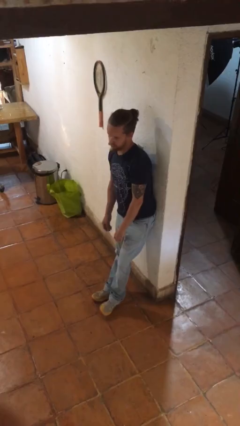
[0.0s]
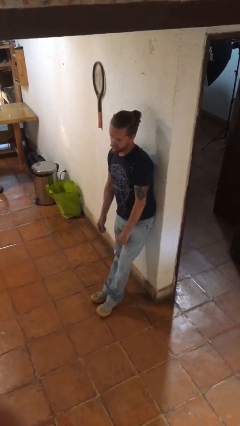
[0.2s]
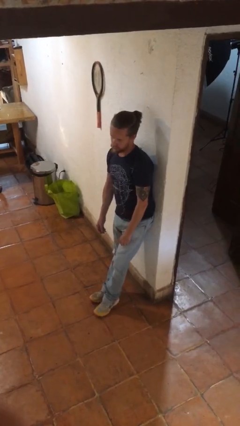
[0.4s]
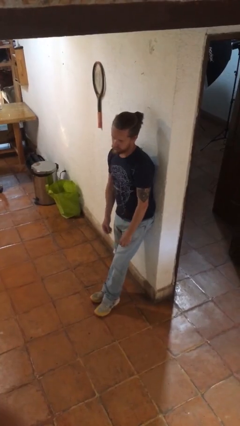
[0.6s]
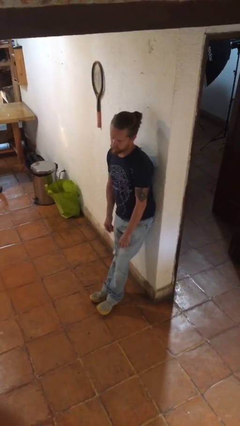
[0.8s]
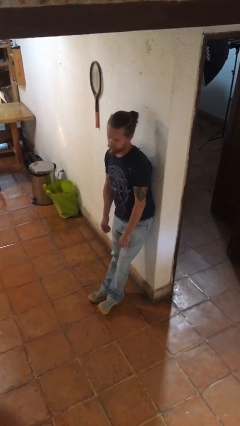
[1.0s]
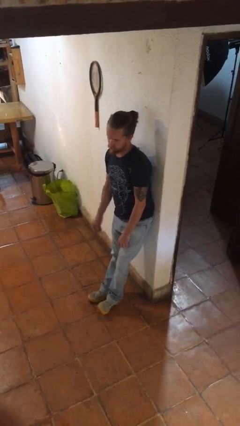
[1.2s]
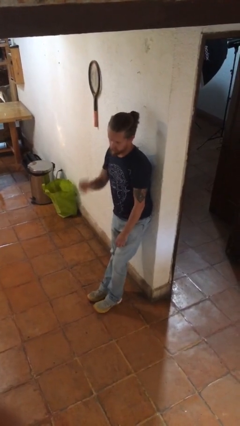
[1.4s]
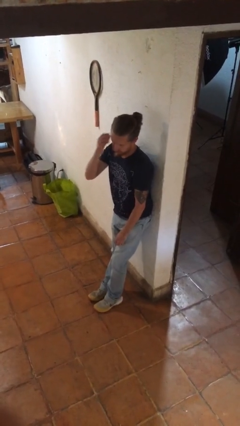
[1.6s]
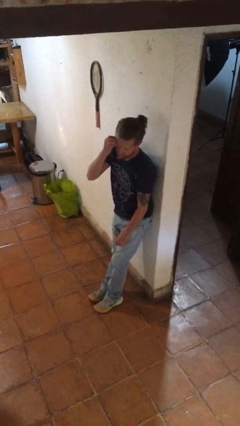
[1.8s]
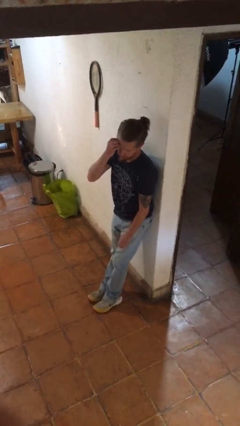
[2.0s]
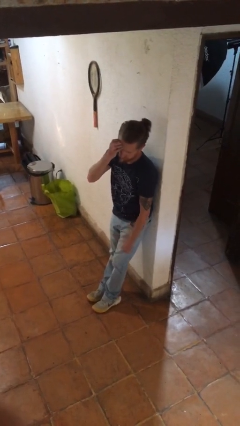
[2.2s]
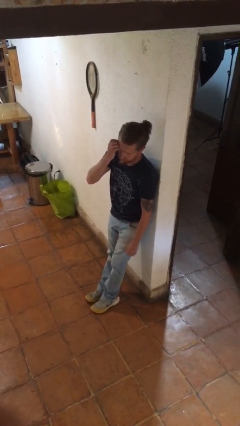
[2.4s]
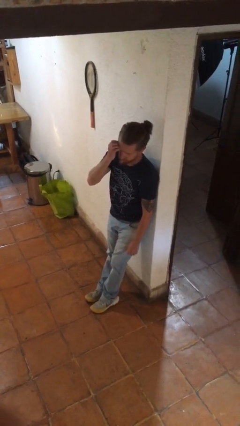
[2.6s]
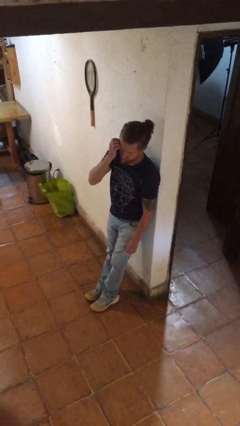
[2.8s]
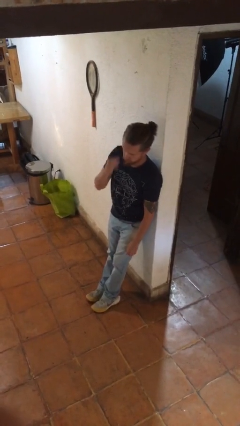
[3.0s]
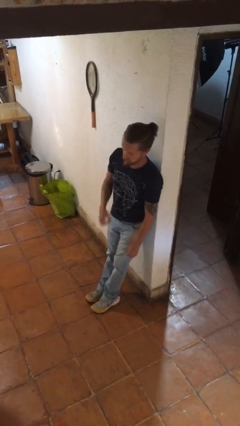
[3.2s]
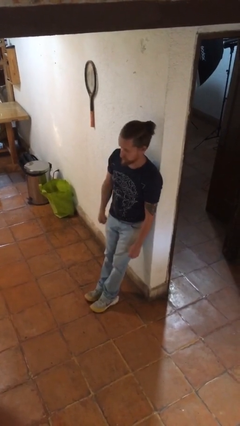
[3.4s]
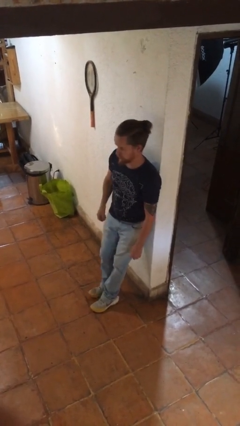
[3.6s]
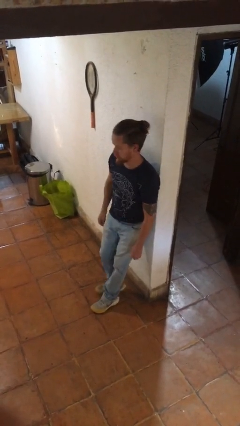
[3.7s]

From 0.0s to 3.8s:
person scratches face

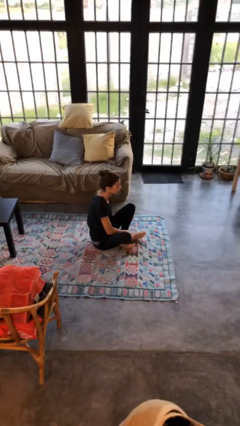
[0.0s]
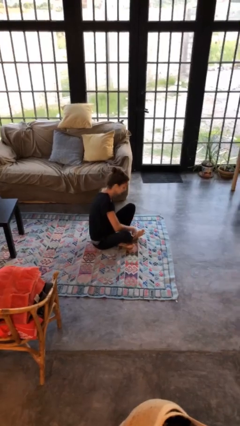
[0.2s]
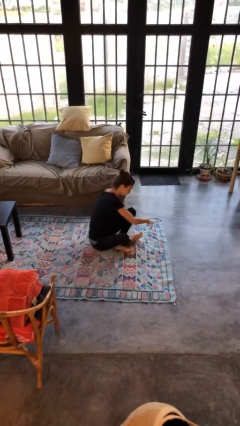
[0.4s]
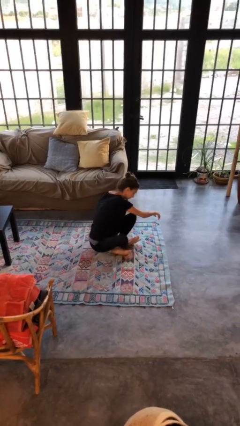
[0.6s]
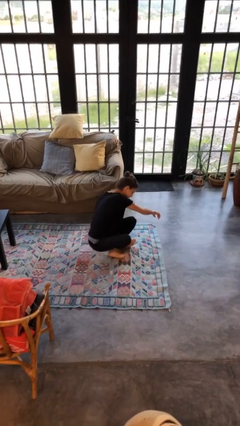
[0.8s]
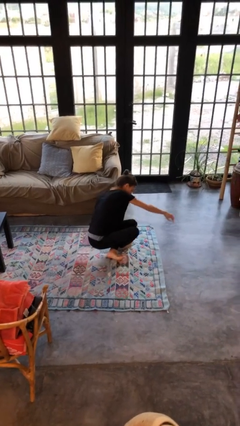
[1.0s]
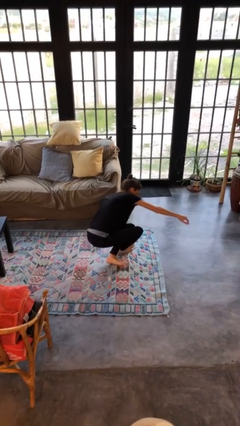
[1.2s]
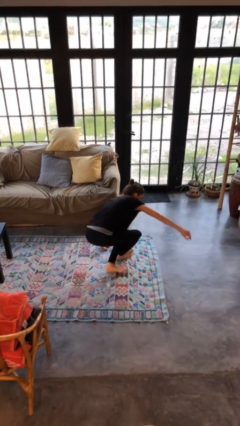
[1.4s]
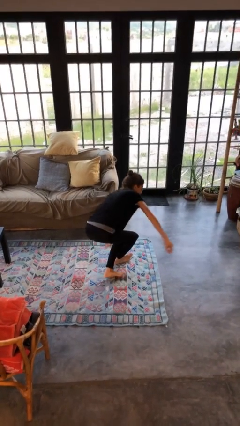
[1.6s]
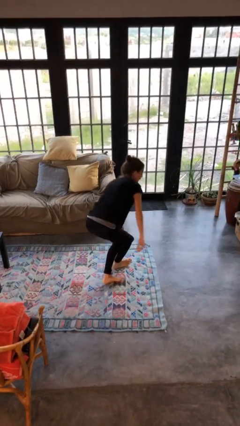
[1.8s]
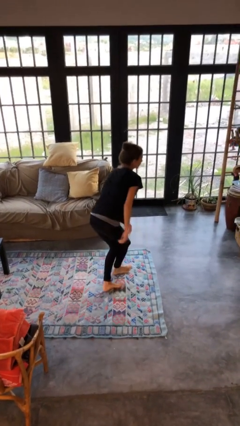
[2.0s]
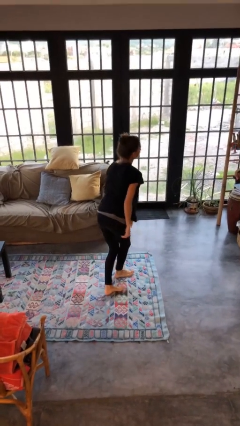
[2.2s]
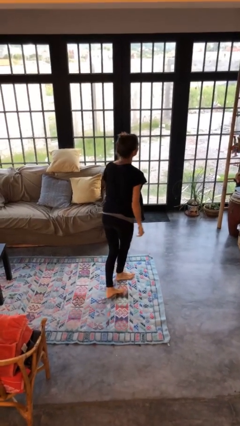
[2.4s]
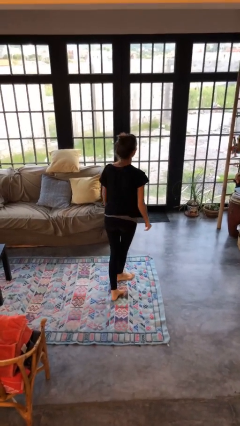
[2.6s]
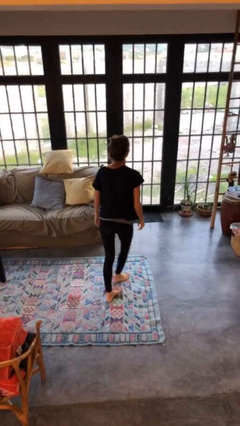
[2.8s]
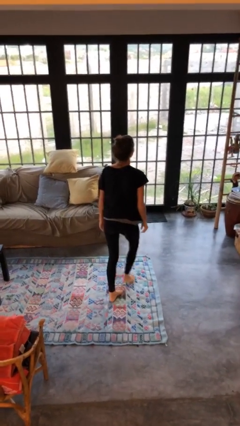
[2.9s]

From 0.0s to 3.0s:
person stands up from floor

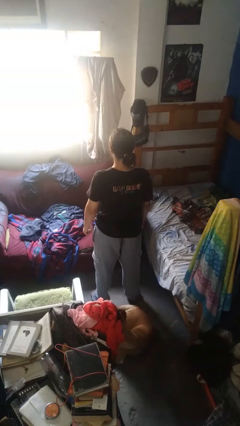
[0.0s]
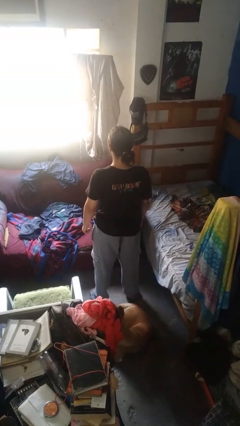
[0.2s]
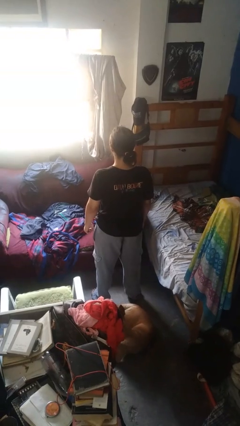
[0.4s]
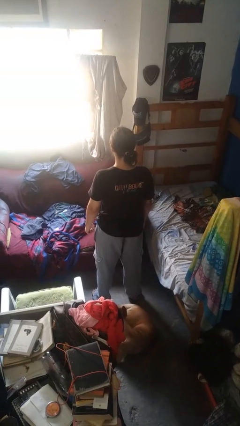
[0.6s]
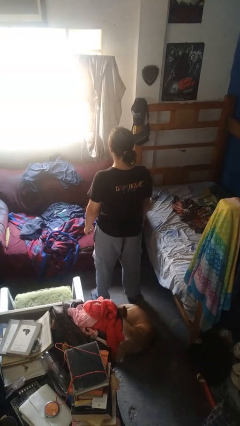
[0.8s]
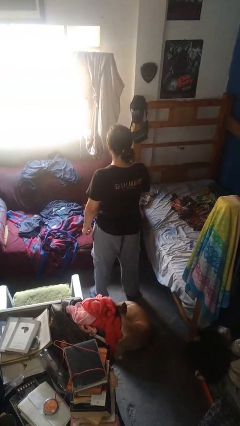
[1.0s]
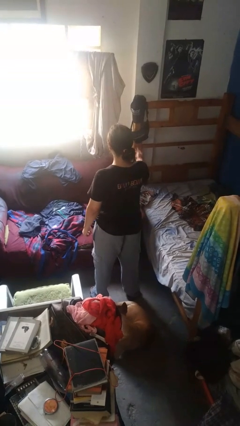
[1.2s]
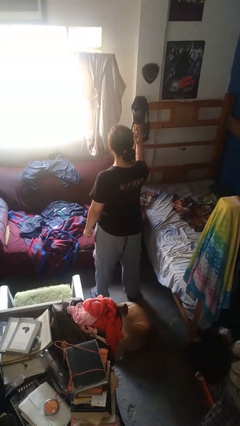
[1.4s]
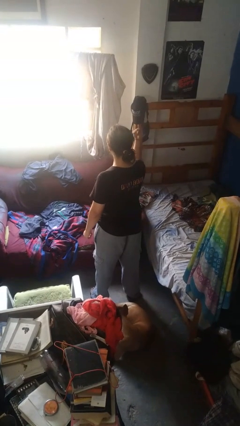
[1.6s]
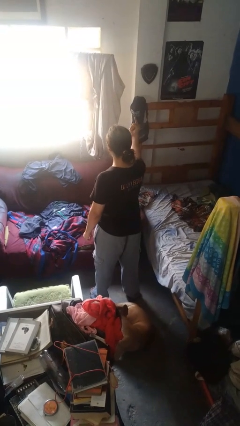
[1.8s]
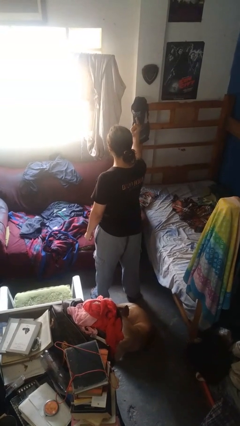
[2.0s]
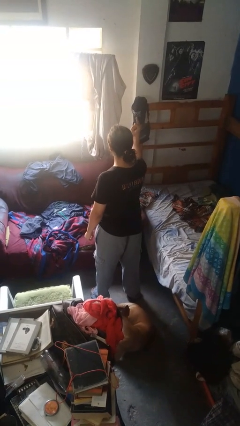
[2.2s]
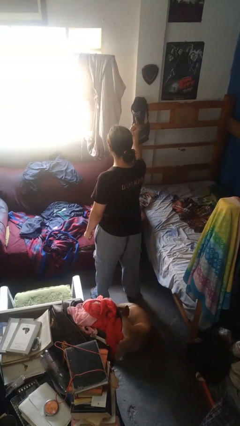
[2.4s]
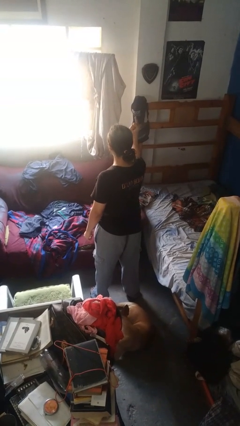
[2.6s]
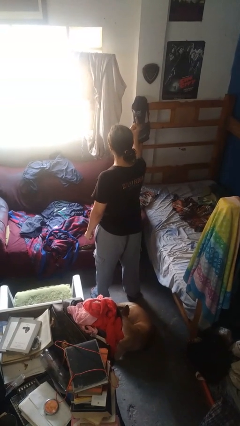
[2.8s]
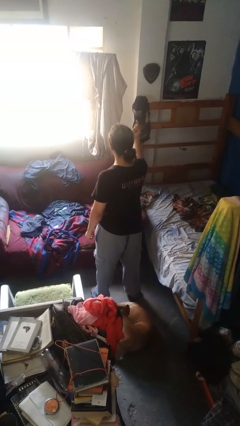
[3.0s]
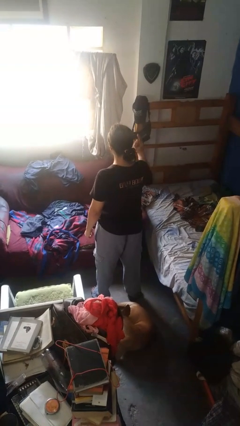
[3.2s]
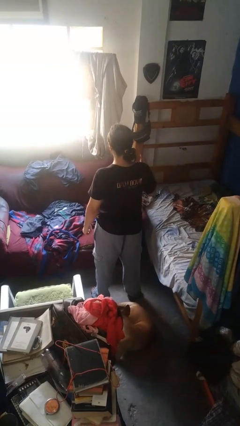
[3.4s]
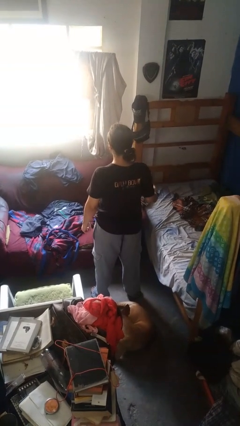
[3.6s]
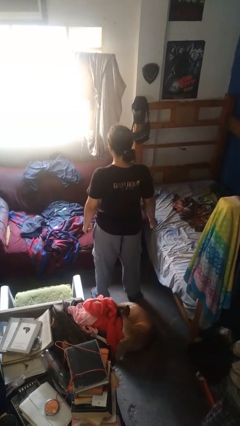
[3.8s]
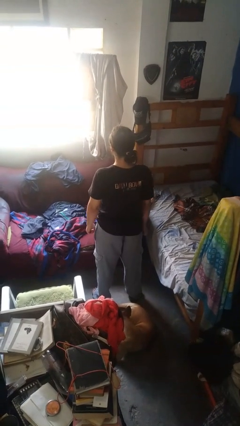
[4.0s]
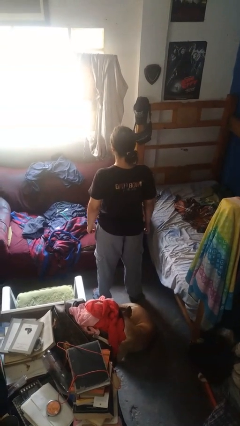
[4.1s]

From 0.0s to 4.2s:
person gestures number one

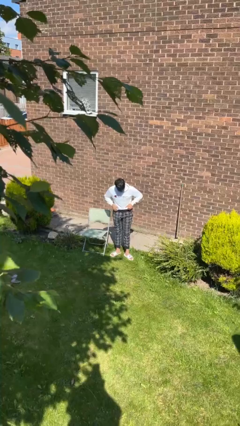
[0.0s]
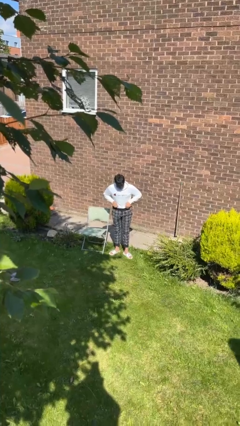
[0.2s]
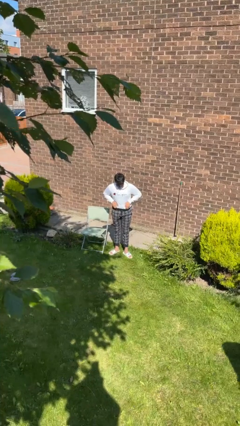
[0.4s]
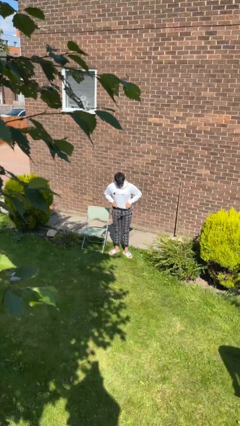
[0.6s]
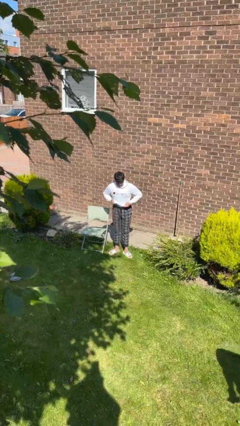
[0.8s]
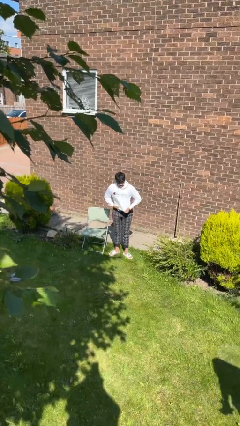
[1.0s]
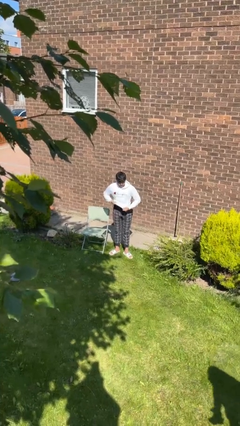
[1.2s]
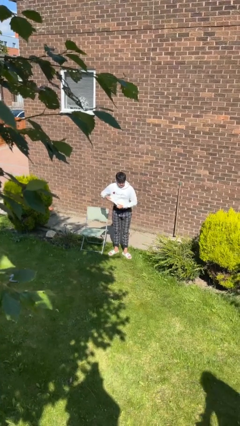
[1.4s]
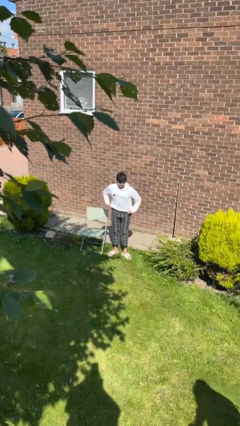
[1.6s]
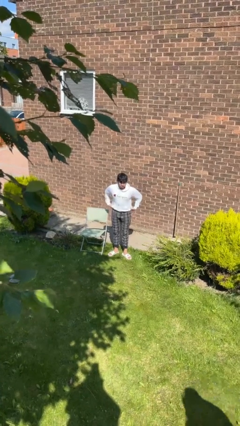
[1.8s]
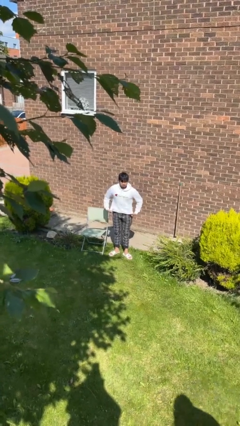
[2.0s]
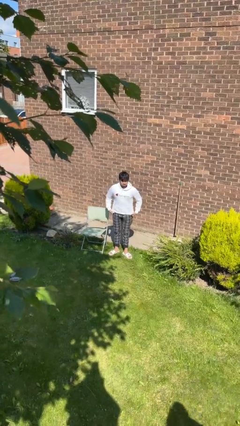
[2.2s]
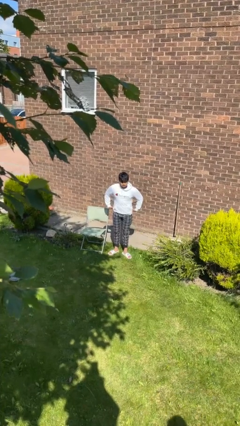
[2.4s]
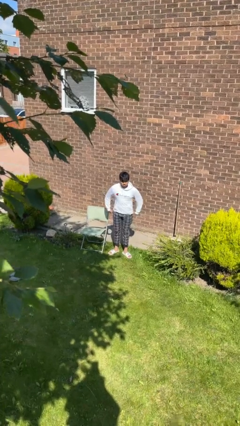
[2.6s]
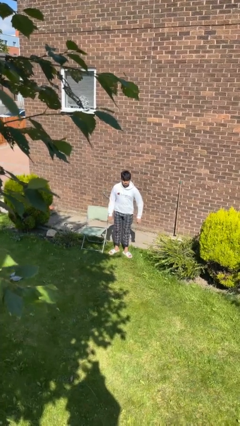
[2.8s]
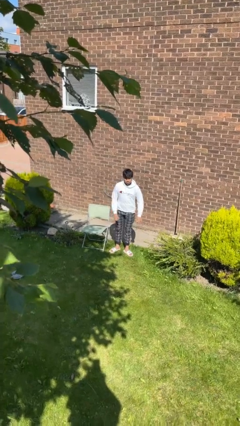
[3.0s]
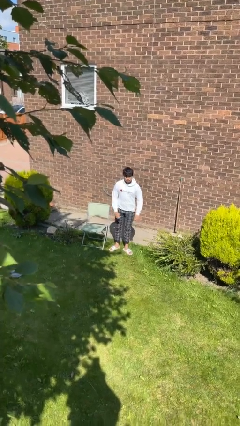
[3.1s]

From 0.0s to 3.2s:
person untucks shirt

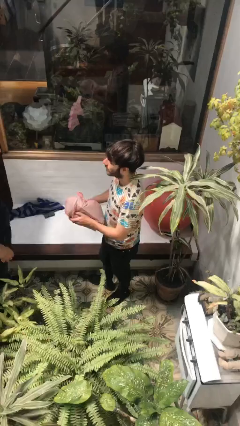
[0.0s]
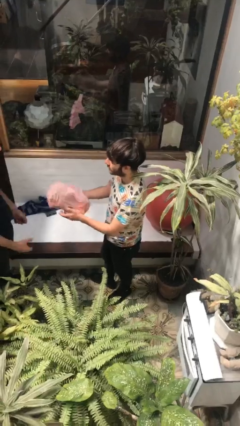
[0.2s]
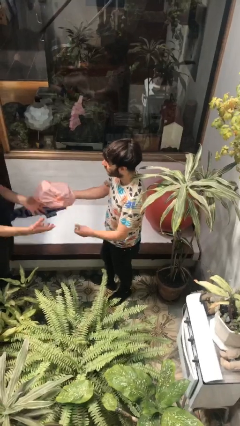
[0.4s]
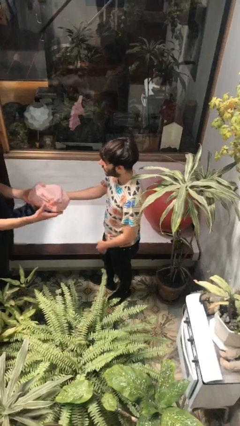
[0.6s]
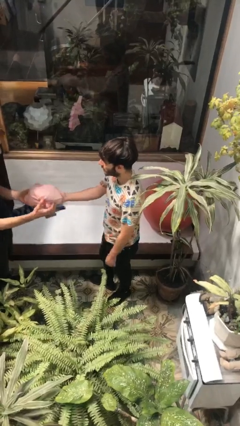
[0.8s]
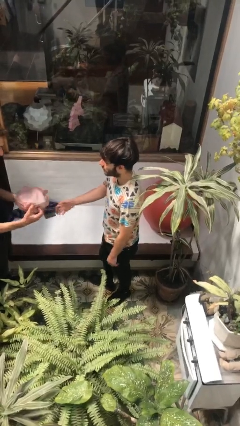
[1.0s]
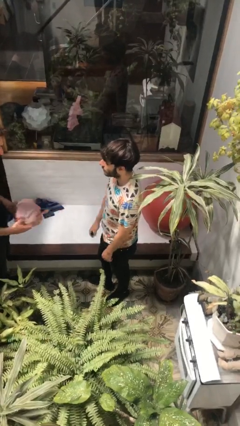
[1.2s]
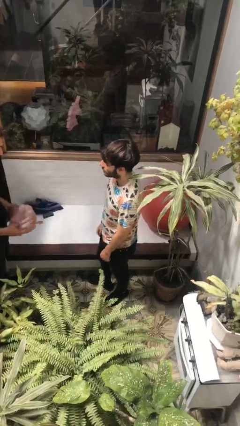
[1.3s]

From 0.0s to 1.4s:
person transfers object to person

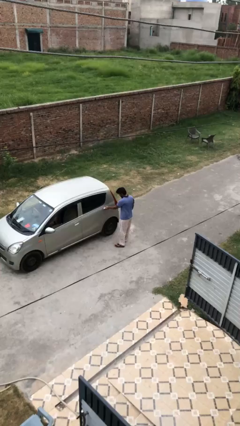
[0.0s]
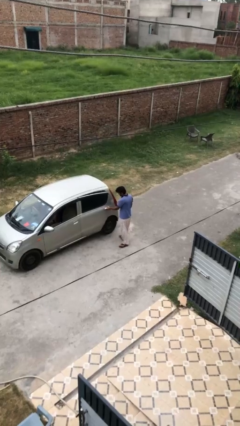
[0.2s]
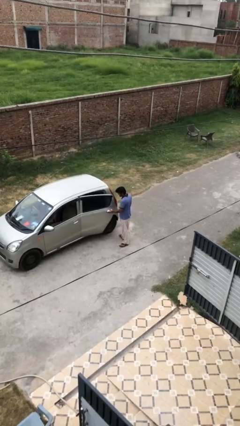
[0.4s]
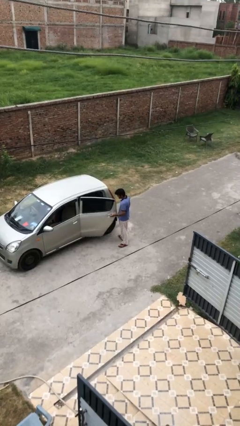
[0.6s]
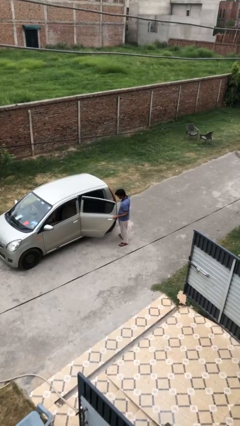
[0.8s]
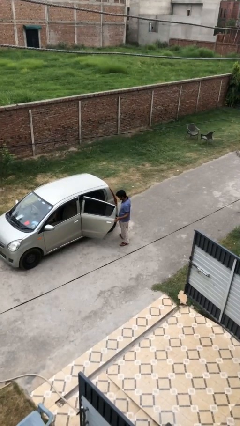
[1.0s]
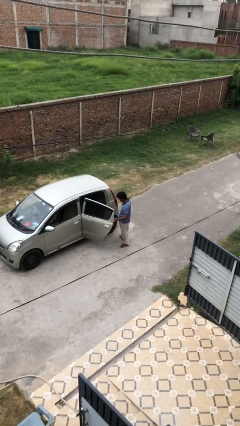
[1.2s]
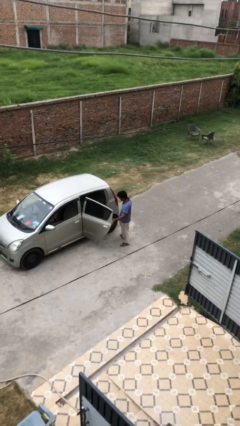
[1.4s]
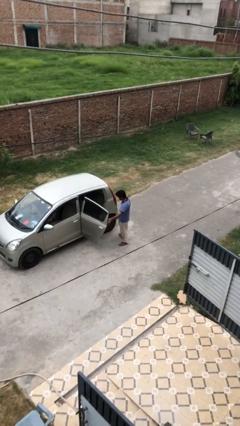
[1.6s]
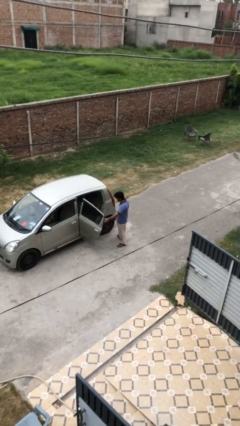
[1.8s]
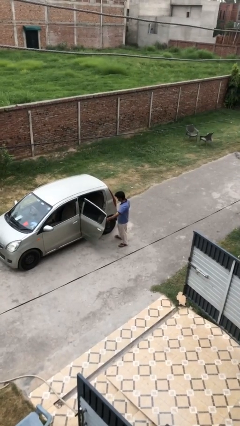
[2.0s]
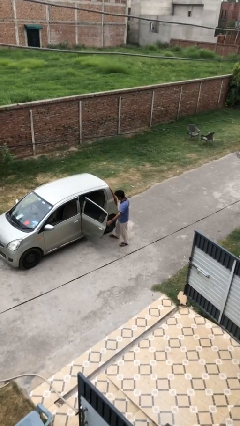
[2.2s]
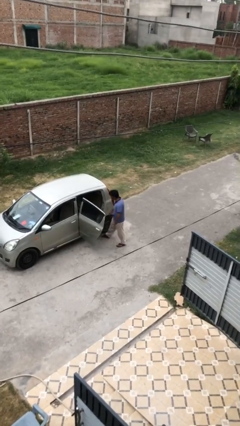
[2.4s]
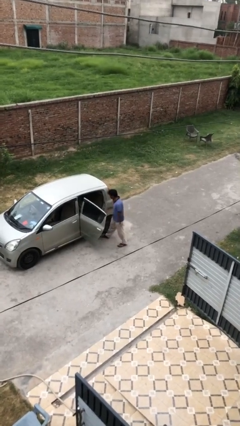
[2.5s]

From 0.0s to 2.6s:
person opens car door
